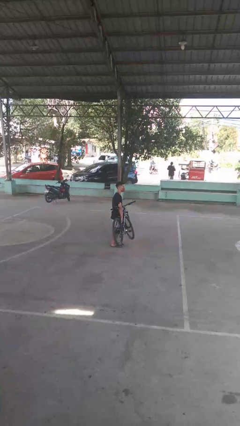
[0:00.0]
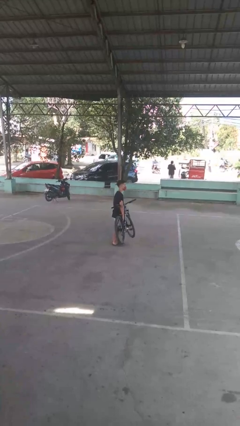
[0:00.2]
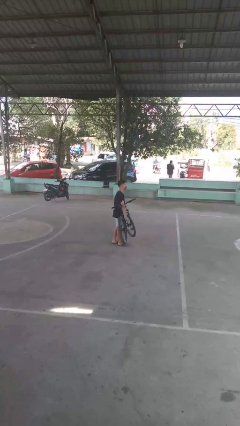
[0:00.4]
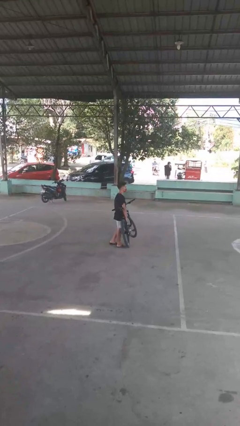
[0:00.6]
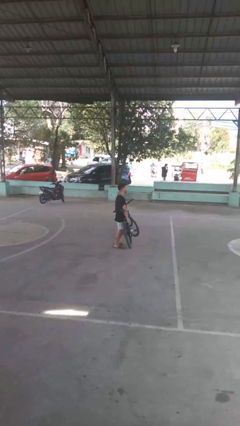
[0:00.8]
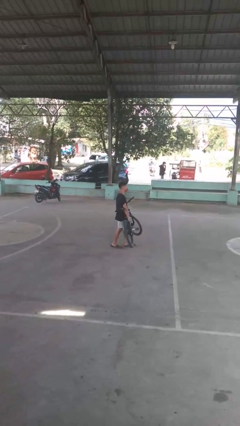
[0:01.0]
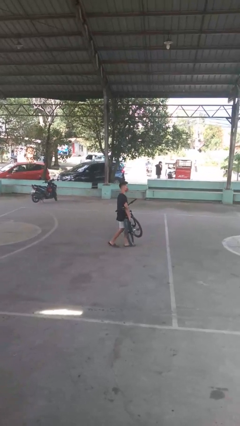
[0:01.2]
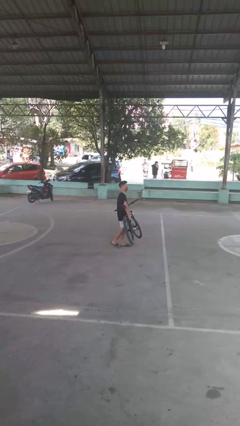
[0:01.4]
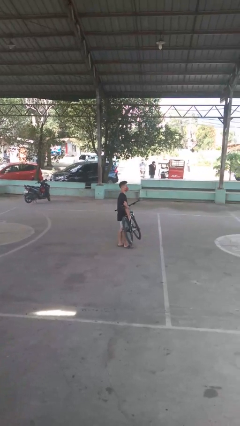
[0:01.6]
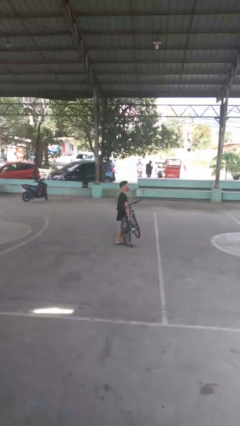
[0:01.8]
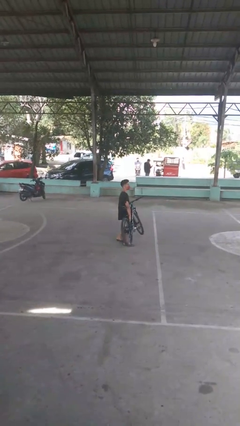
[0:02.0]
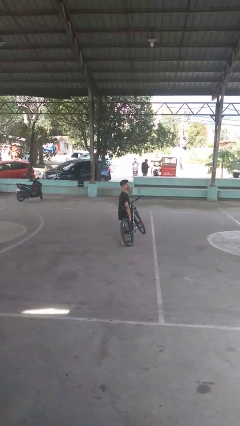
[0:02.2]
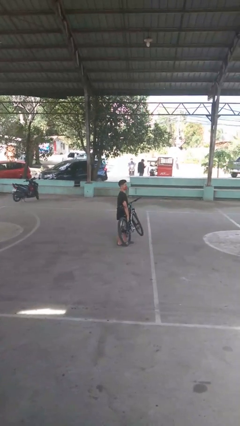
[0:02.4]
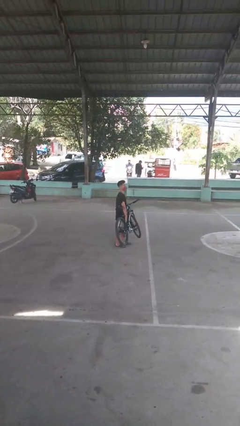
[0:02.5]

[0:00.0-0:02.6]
person carries bicycle

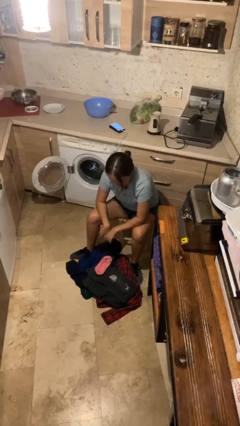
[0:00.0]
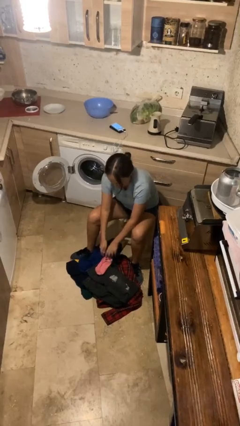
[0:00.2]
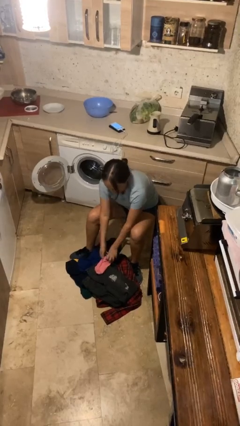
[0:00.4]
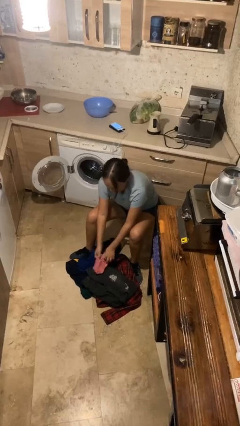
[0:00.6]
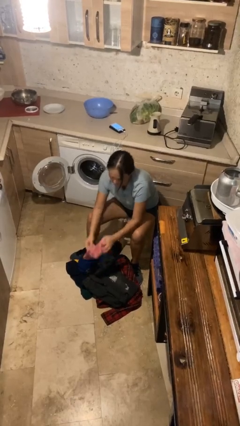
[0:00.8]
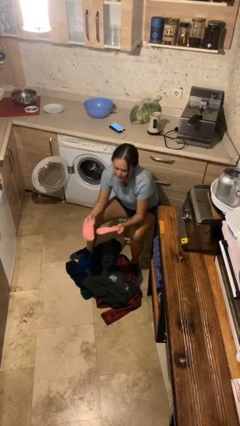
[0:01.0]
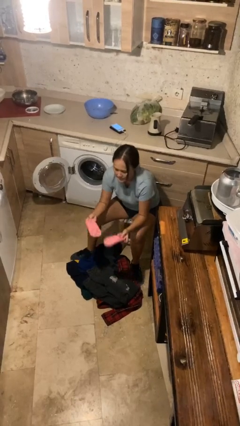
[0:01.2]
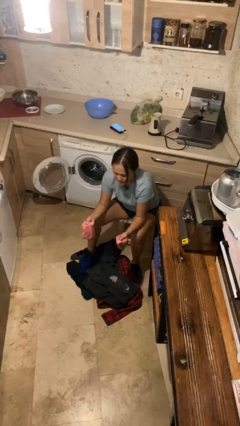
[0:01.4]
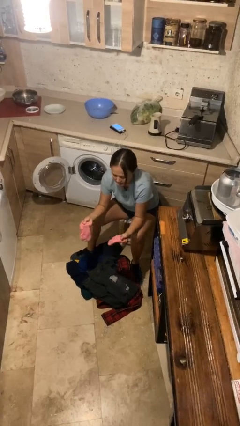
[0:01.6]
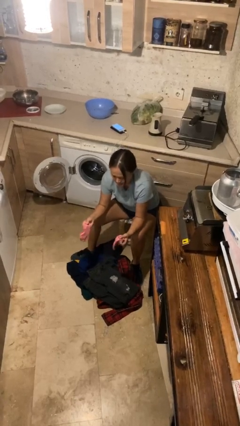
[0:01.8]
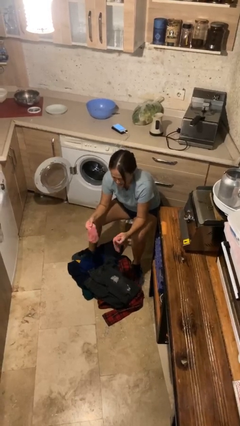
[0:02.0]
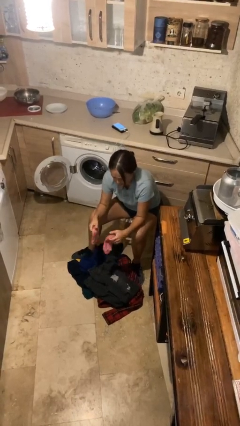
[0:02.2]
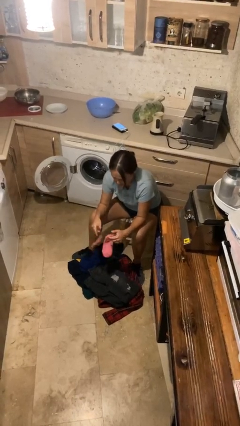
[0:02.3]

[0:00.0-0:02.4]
person folds socks

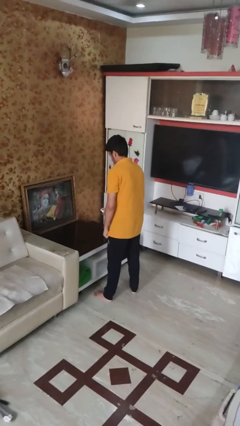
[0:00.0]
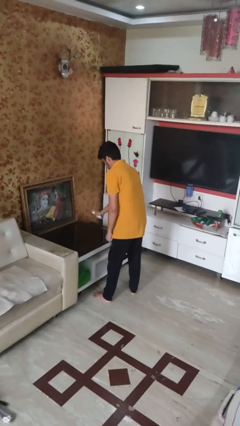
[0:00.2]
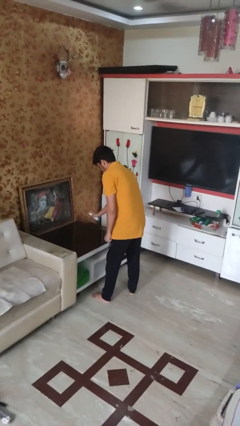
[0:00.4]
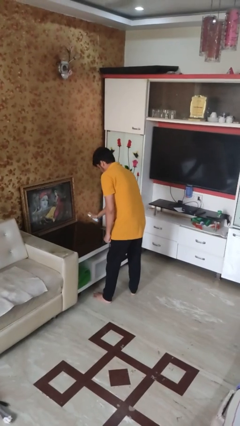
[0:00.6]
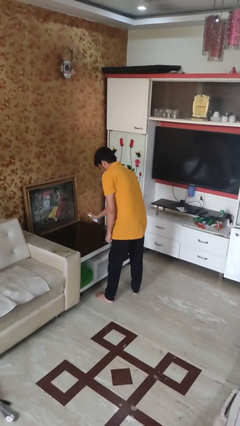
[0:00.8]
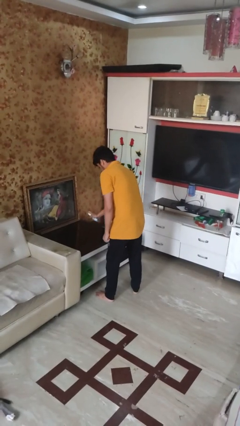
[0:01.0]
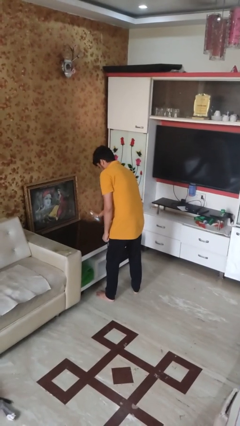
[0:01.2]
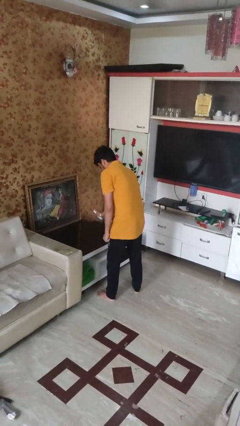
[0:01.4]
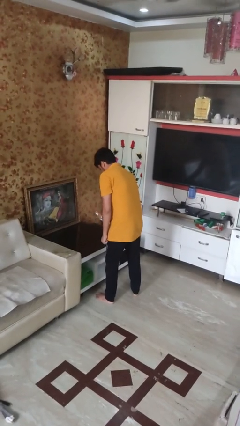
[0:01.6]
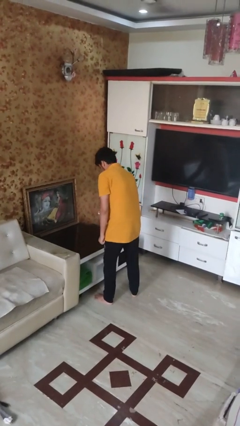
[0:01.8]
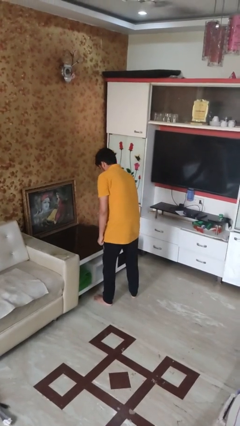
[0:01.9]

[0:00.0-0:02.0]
person sprays from bottle

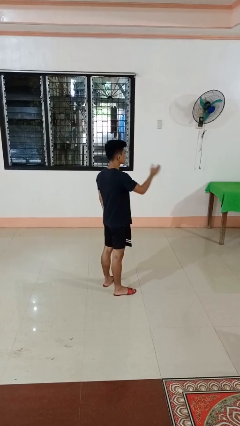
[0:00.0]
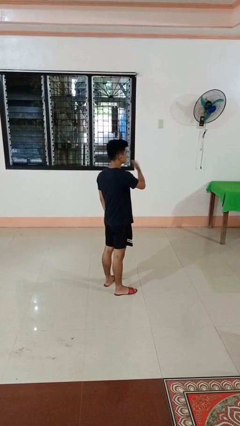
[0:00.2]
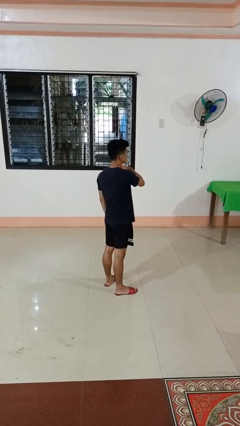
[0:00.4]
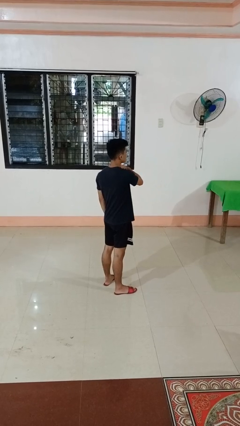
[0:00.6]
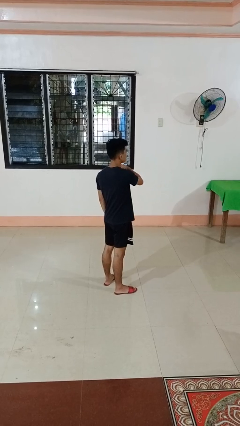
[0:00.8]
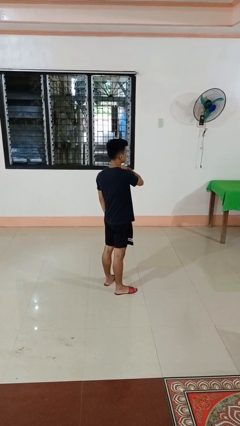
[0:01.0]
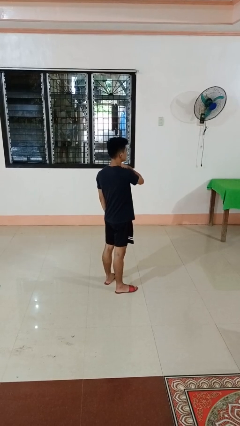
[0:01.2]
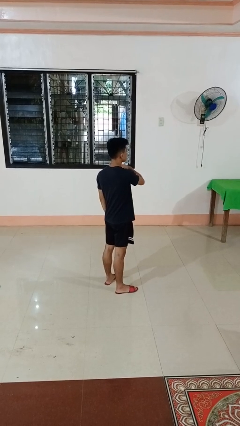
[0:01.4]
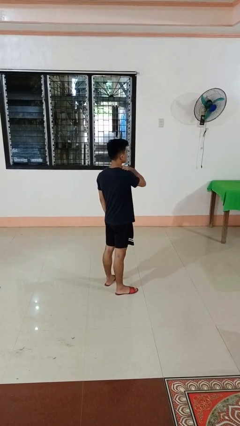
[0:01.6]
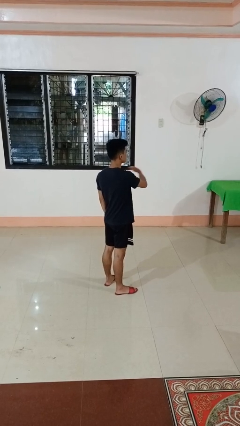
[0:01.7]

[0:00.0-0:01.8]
person gestures swipe left

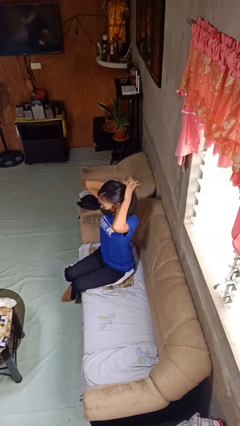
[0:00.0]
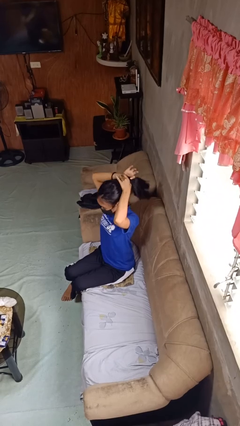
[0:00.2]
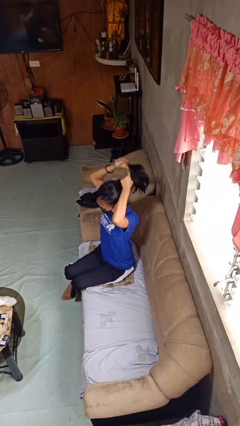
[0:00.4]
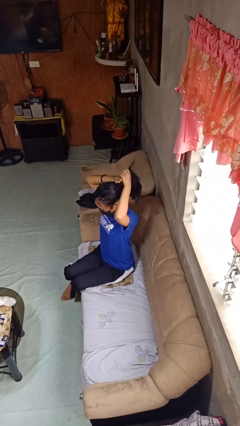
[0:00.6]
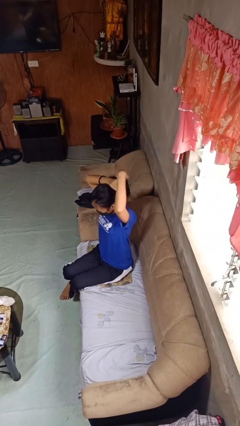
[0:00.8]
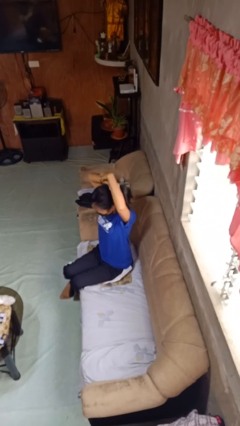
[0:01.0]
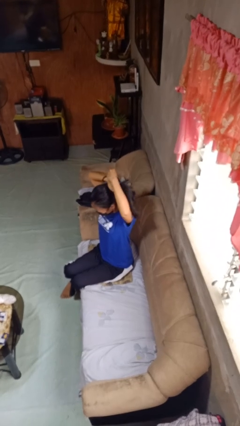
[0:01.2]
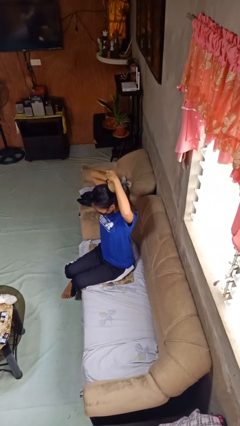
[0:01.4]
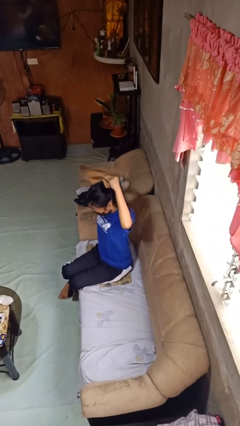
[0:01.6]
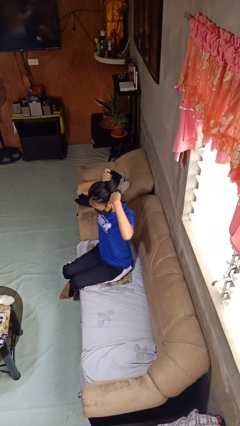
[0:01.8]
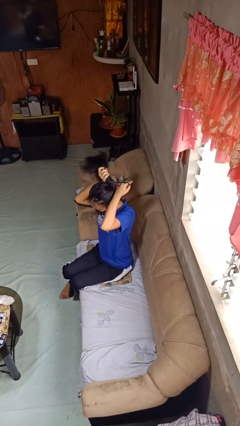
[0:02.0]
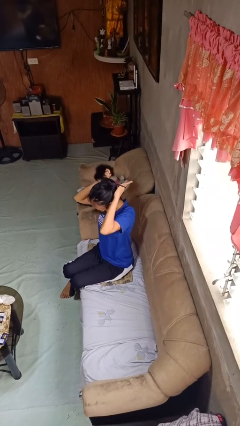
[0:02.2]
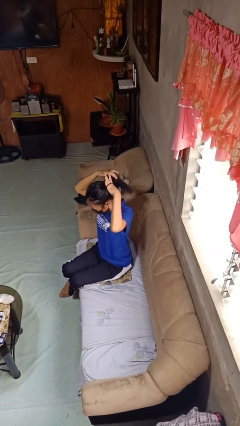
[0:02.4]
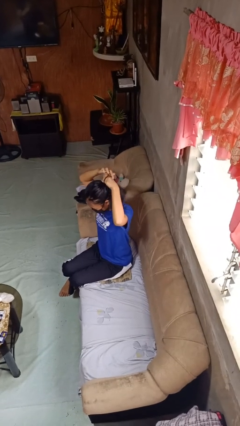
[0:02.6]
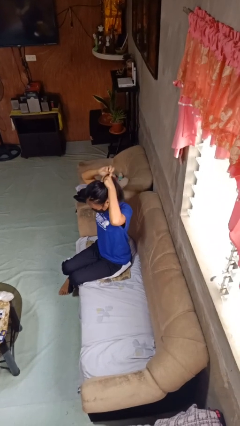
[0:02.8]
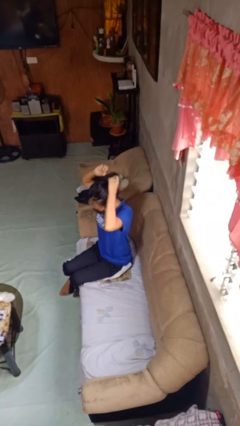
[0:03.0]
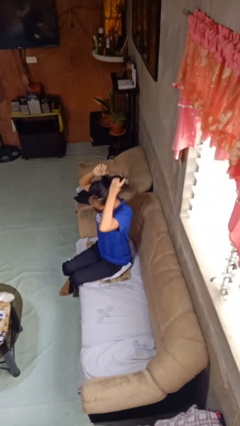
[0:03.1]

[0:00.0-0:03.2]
person puts hair in ponytail

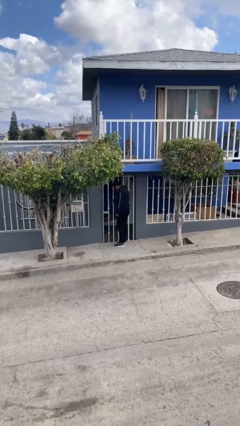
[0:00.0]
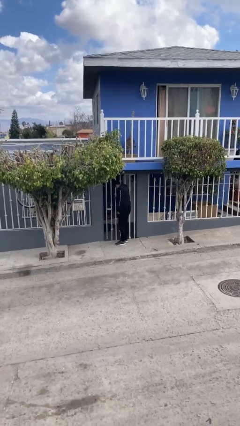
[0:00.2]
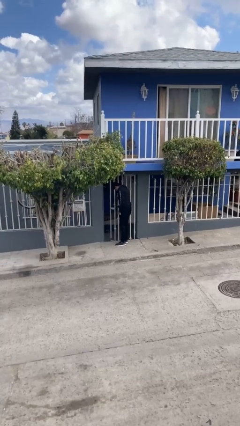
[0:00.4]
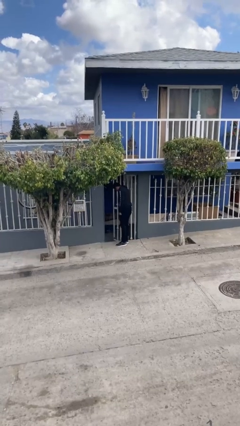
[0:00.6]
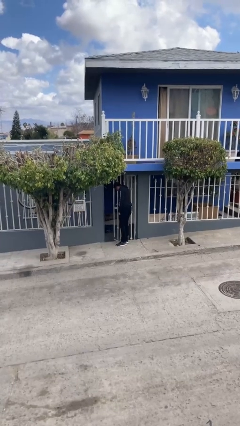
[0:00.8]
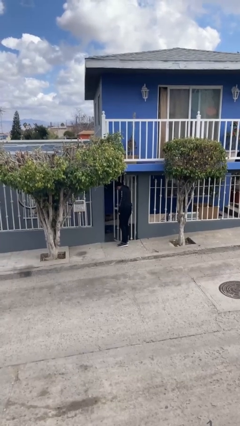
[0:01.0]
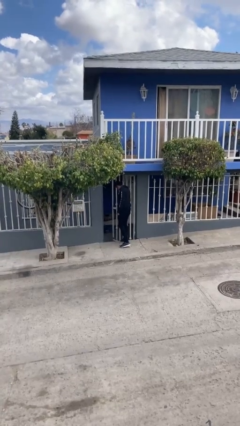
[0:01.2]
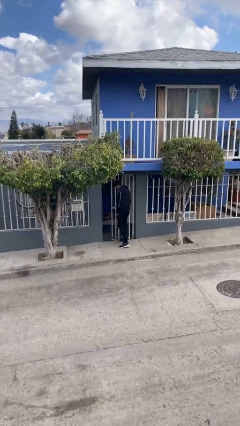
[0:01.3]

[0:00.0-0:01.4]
person opens facility door

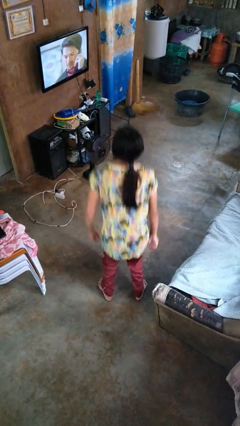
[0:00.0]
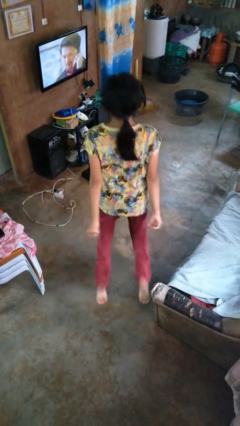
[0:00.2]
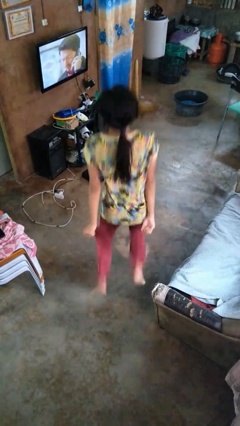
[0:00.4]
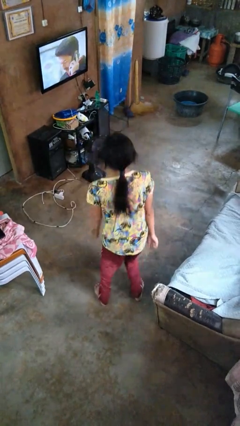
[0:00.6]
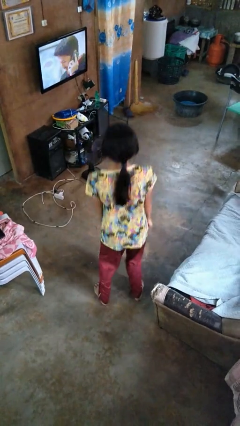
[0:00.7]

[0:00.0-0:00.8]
person jumps

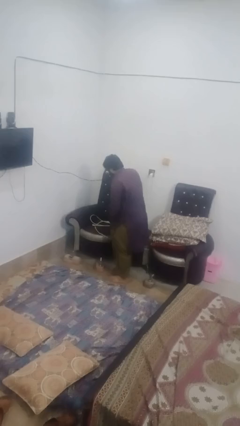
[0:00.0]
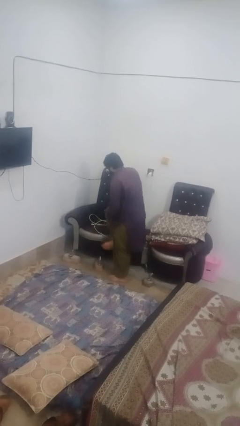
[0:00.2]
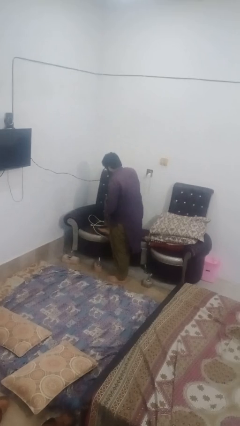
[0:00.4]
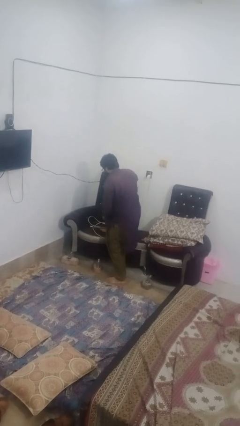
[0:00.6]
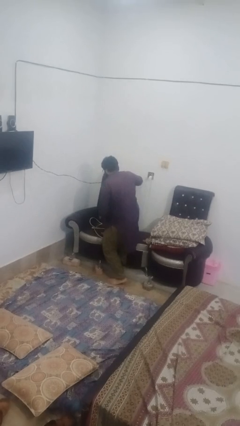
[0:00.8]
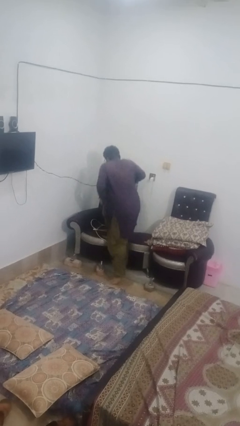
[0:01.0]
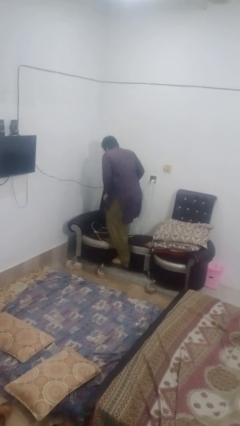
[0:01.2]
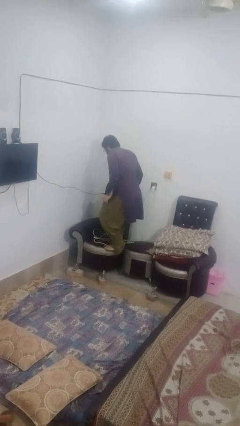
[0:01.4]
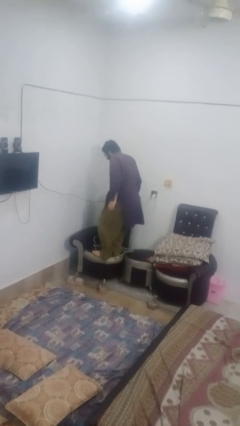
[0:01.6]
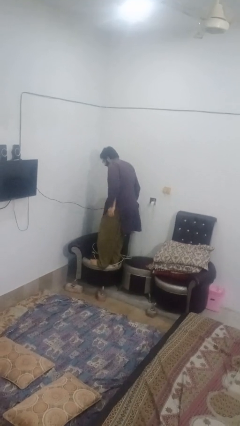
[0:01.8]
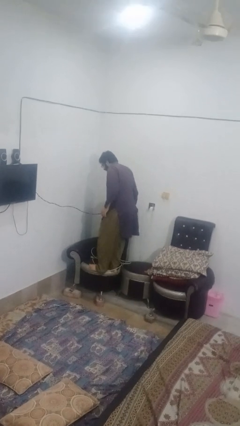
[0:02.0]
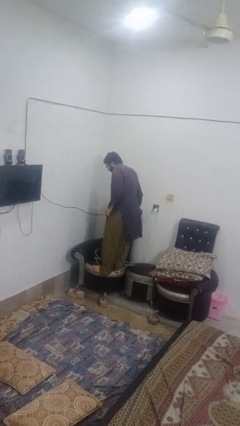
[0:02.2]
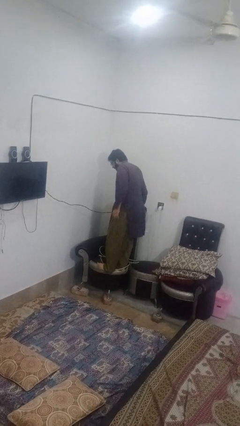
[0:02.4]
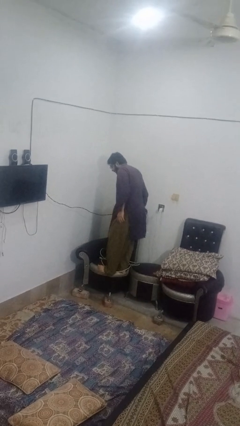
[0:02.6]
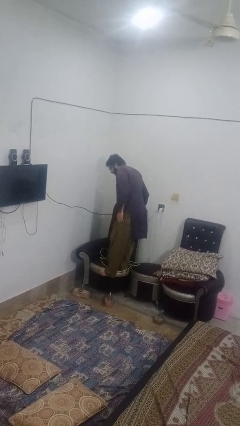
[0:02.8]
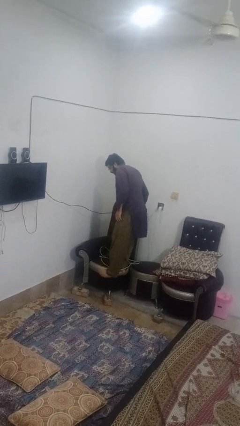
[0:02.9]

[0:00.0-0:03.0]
person climbs on couch
